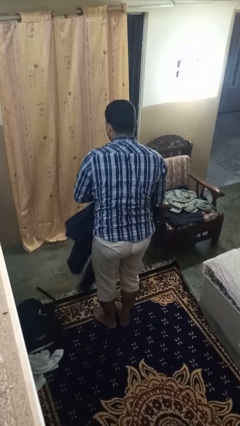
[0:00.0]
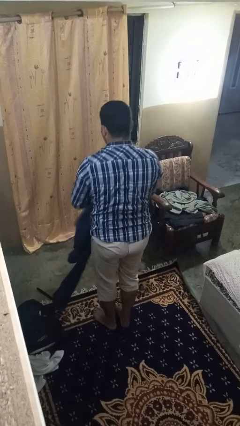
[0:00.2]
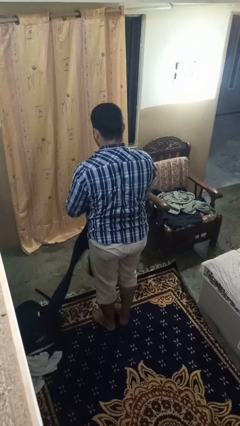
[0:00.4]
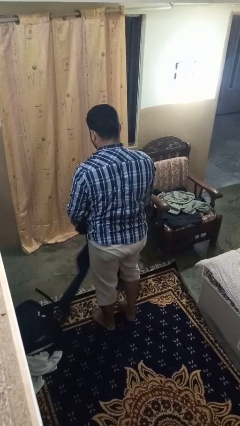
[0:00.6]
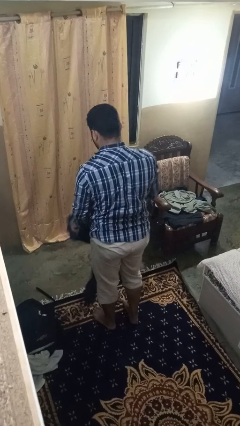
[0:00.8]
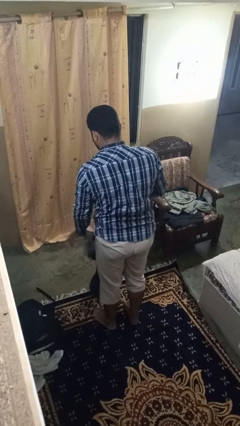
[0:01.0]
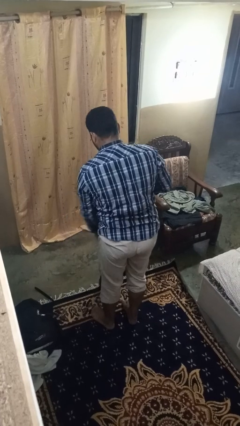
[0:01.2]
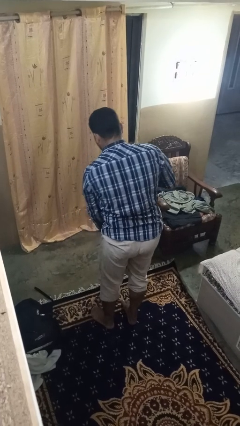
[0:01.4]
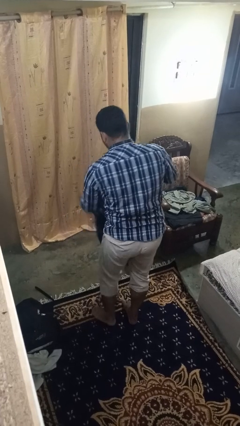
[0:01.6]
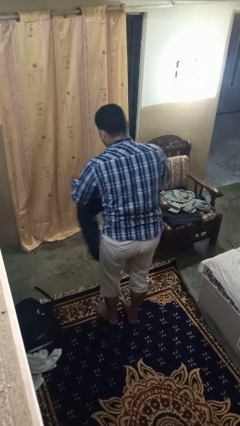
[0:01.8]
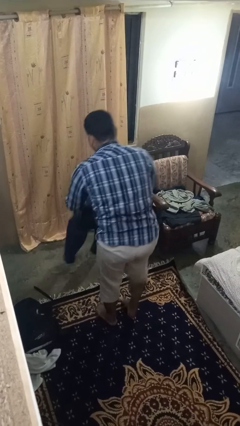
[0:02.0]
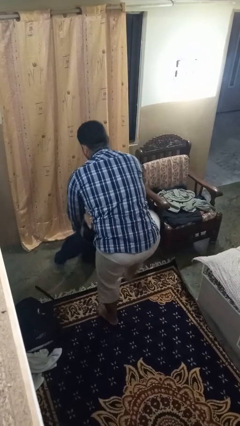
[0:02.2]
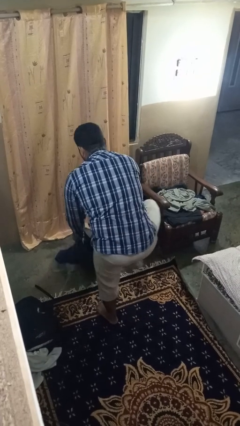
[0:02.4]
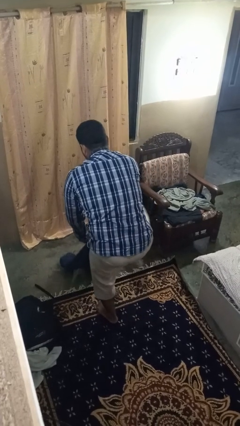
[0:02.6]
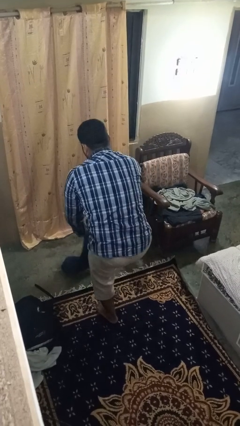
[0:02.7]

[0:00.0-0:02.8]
person puts on pants

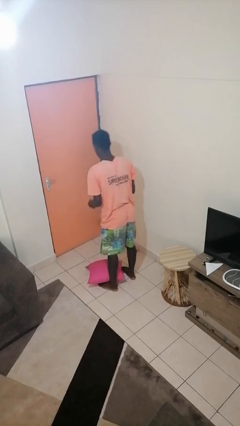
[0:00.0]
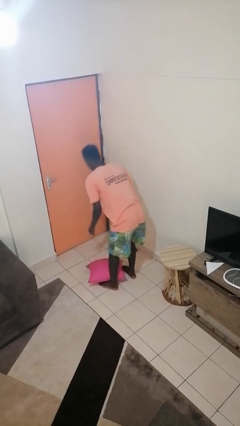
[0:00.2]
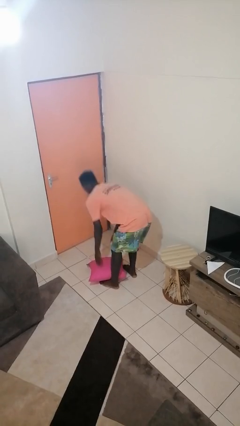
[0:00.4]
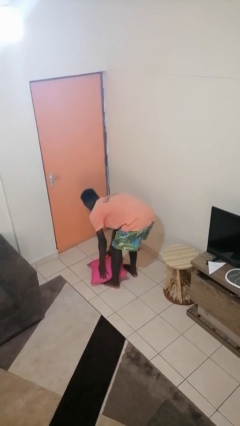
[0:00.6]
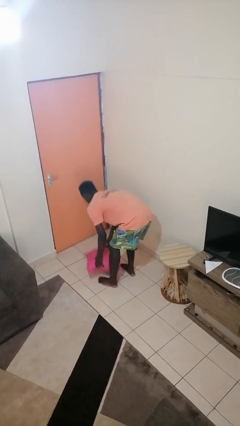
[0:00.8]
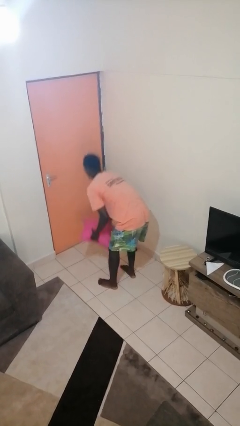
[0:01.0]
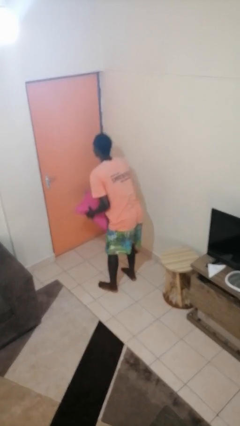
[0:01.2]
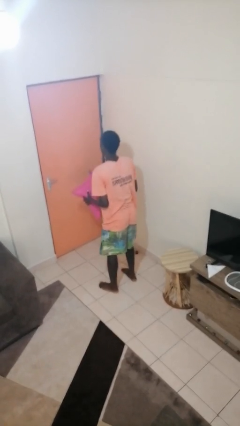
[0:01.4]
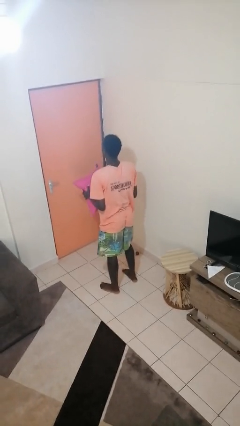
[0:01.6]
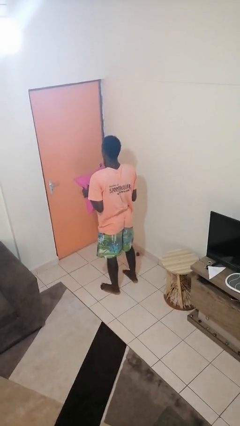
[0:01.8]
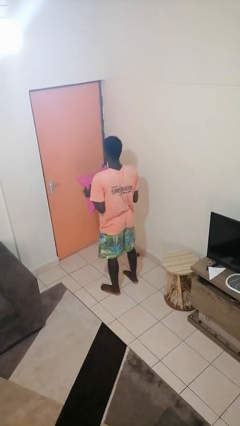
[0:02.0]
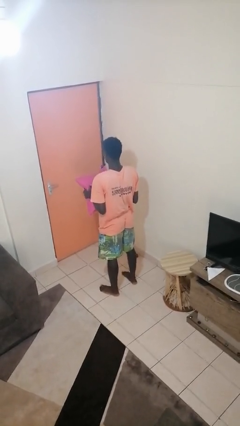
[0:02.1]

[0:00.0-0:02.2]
person picks up object from floor

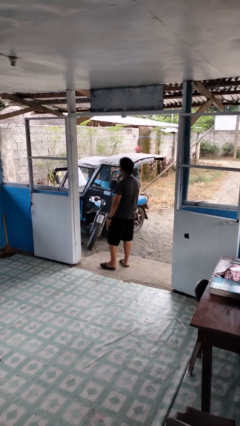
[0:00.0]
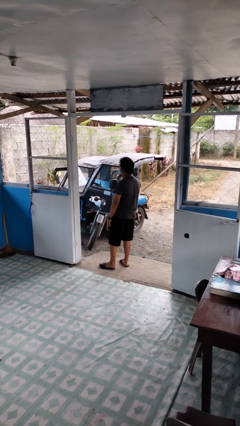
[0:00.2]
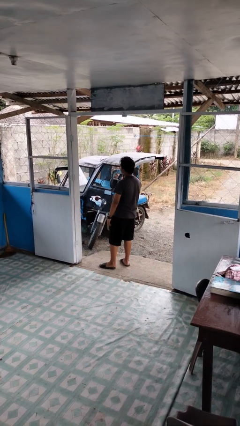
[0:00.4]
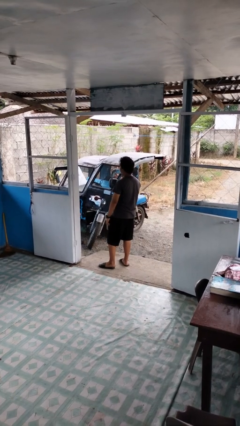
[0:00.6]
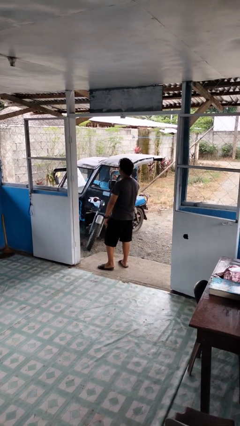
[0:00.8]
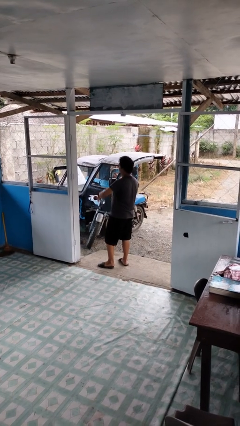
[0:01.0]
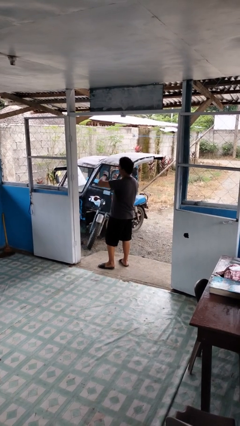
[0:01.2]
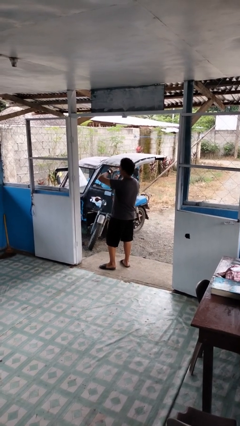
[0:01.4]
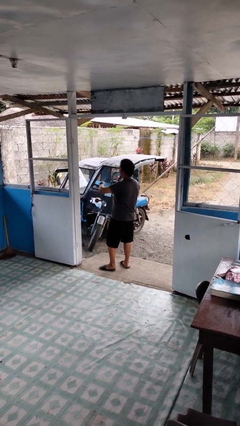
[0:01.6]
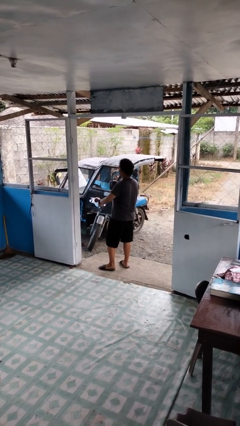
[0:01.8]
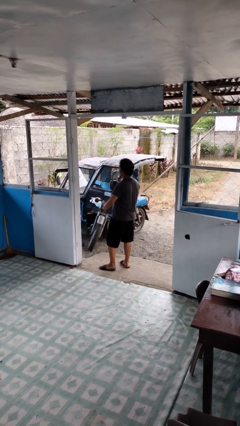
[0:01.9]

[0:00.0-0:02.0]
person looks at wristwatch

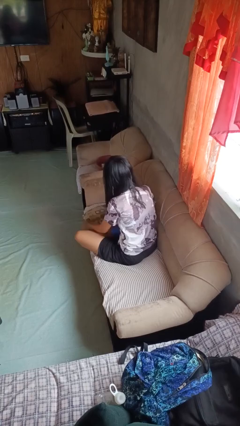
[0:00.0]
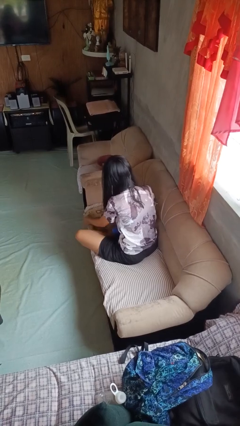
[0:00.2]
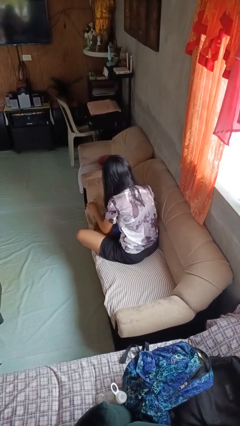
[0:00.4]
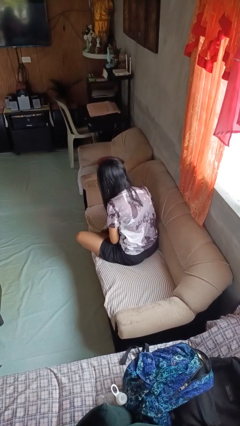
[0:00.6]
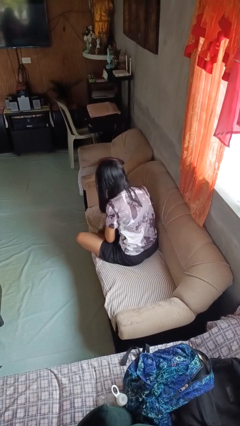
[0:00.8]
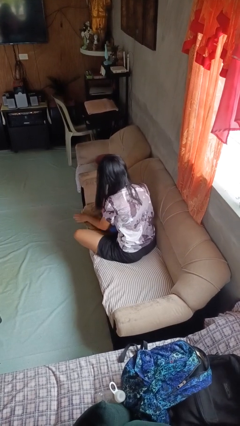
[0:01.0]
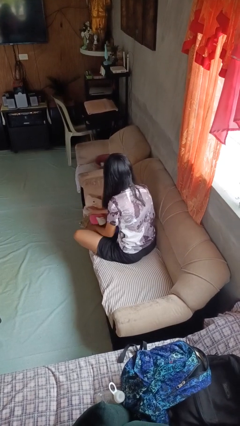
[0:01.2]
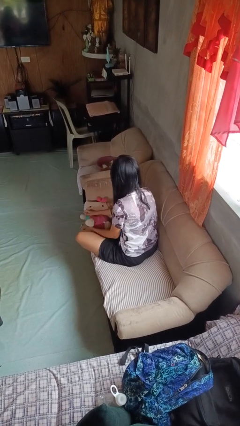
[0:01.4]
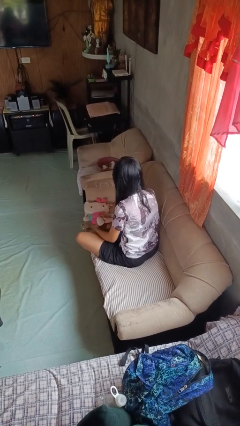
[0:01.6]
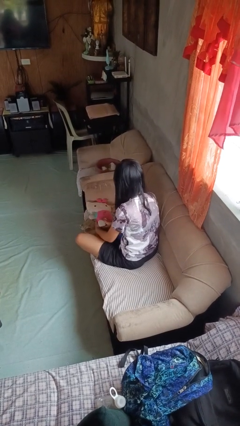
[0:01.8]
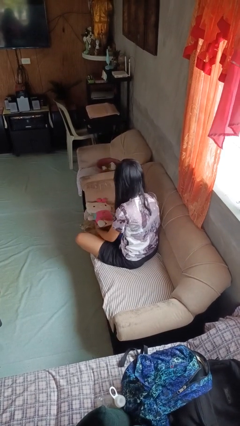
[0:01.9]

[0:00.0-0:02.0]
person searches in couch

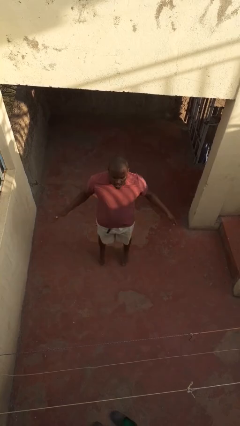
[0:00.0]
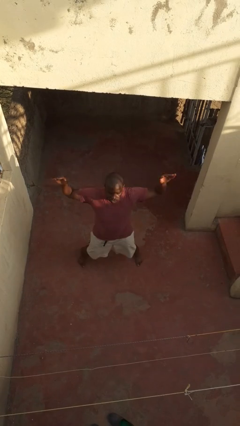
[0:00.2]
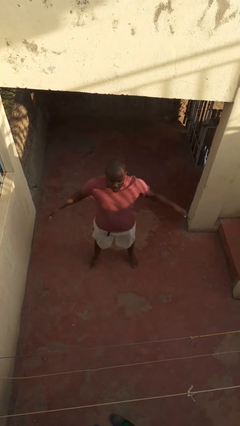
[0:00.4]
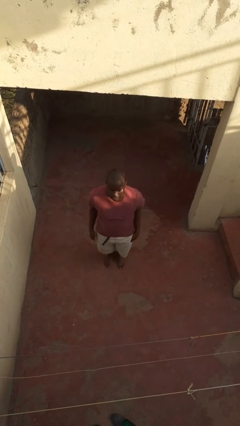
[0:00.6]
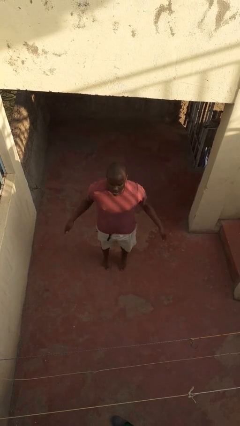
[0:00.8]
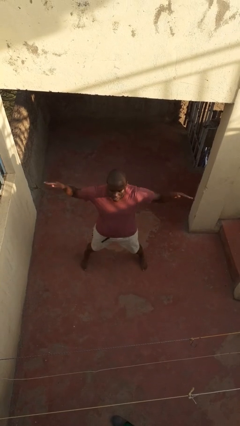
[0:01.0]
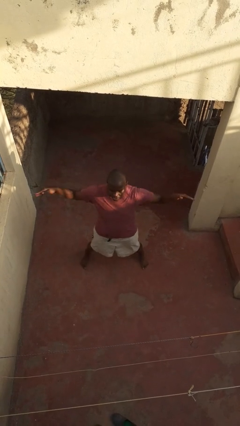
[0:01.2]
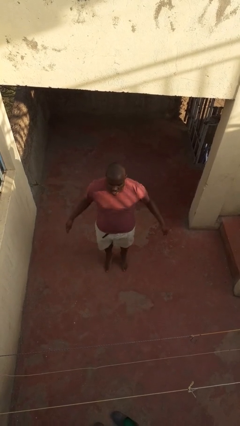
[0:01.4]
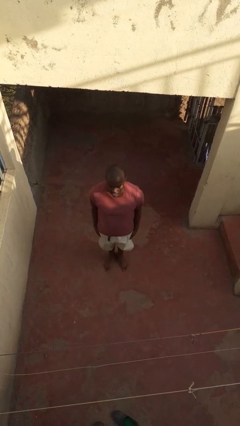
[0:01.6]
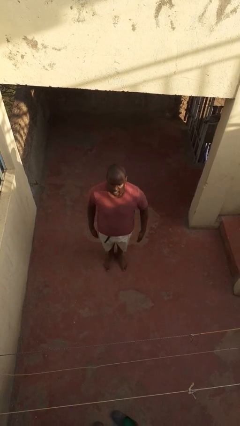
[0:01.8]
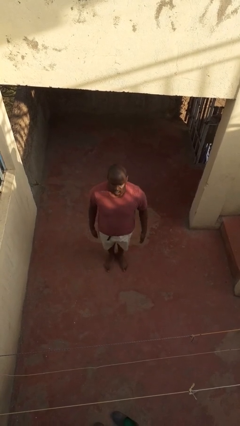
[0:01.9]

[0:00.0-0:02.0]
person exercises with jumping jacks

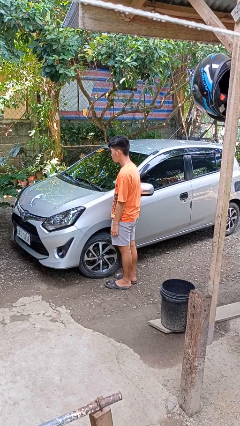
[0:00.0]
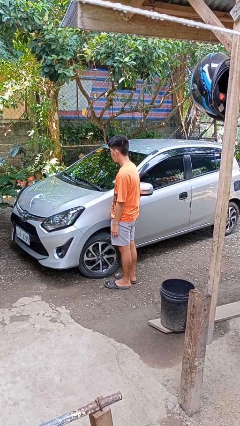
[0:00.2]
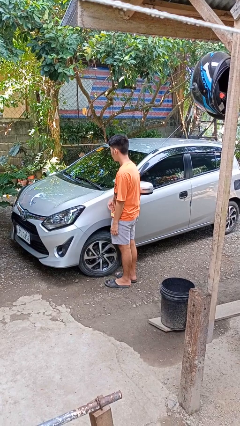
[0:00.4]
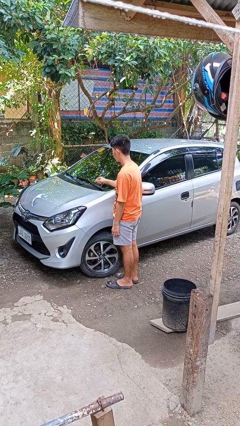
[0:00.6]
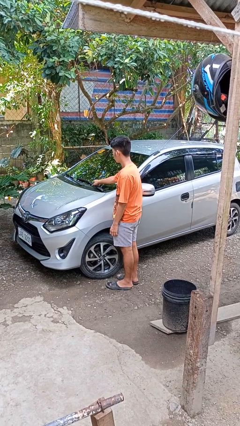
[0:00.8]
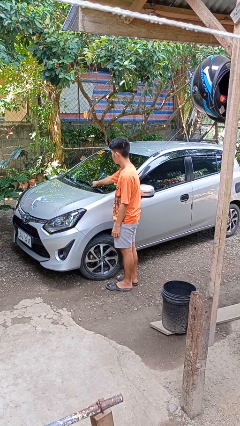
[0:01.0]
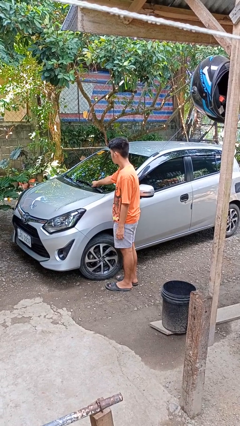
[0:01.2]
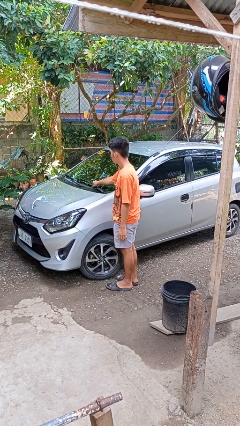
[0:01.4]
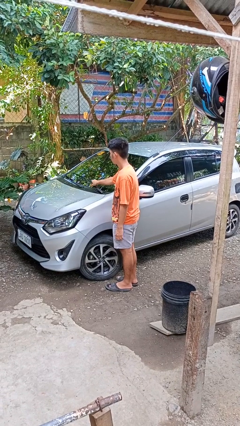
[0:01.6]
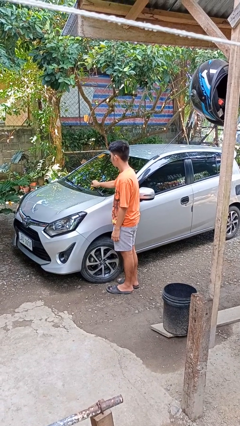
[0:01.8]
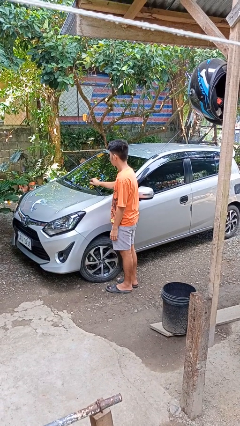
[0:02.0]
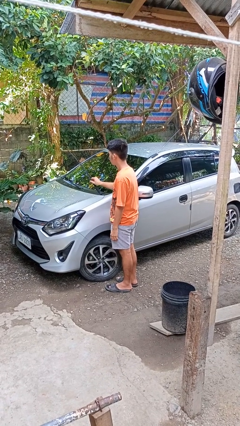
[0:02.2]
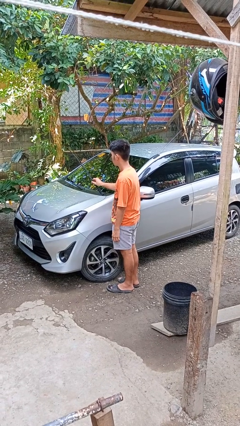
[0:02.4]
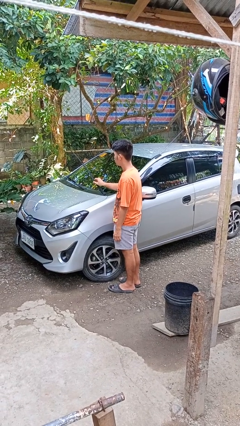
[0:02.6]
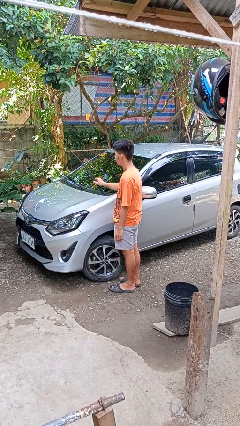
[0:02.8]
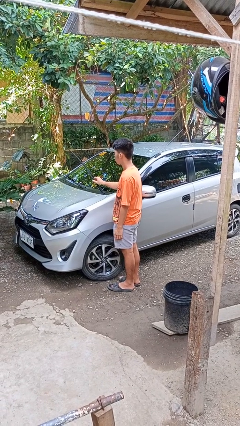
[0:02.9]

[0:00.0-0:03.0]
person flips up car wipers

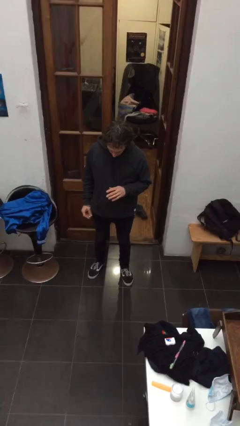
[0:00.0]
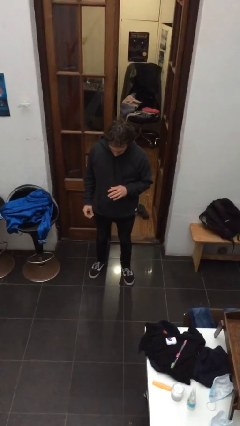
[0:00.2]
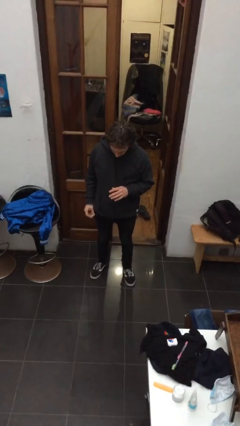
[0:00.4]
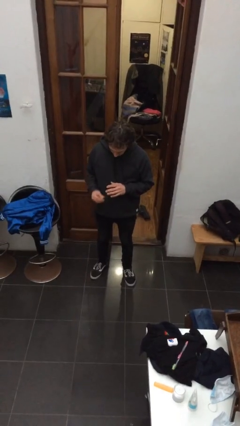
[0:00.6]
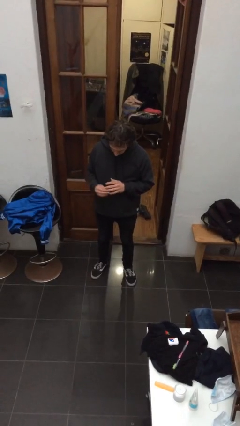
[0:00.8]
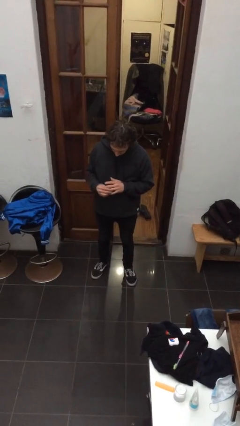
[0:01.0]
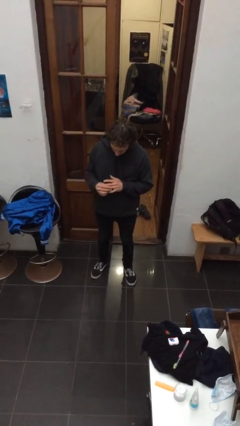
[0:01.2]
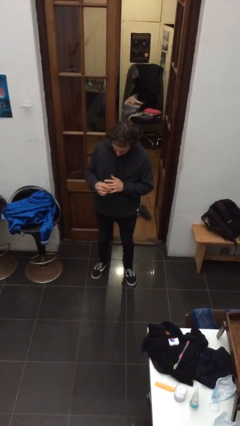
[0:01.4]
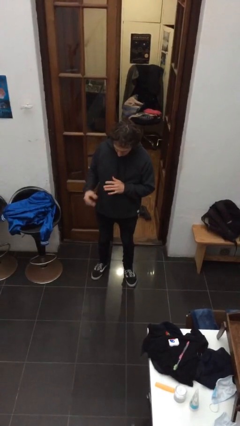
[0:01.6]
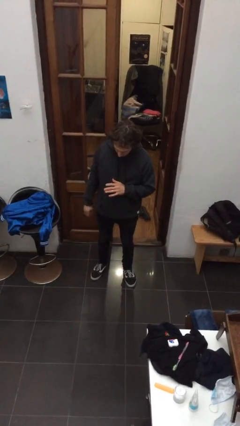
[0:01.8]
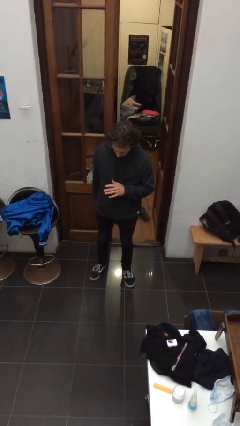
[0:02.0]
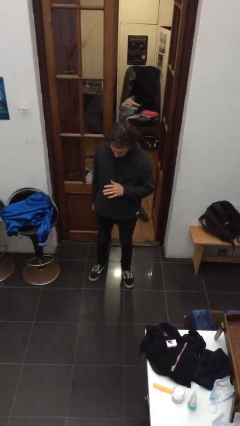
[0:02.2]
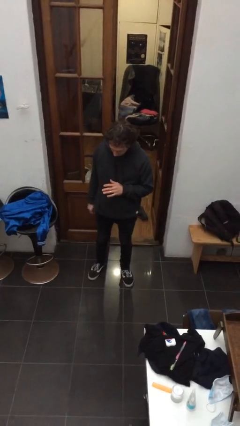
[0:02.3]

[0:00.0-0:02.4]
person puts on ring

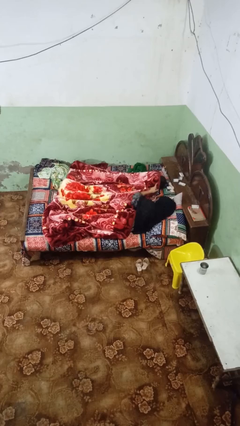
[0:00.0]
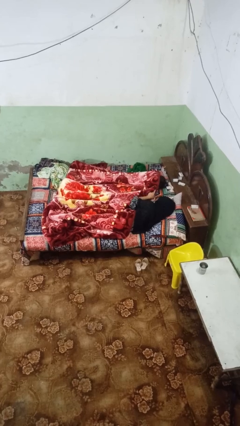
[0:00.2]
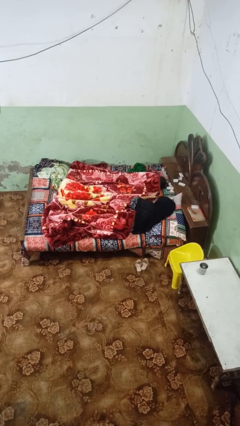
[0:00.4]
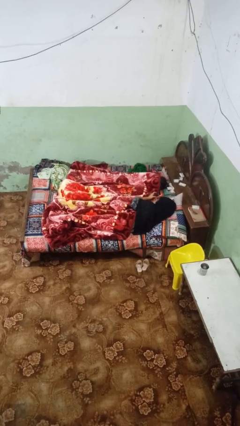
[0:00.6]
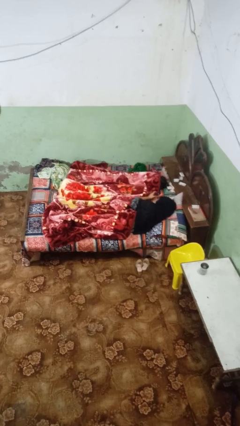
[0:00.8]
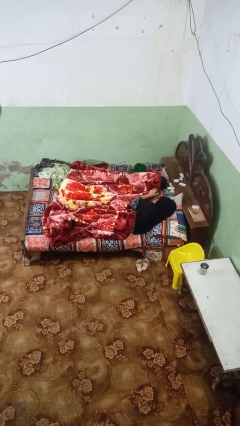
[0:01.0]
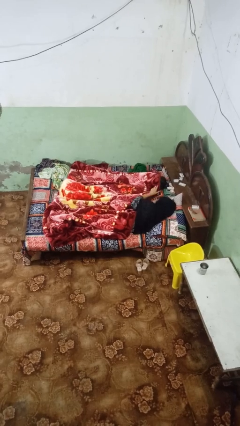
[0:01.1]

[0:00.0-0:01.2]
person covers friend with blanket
